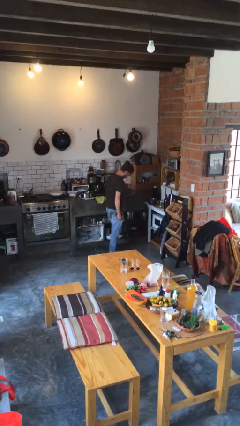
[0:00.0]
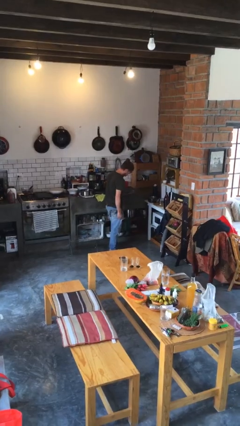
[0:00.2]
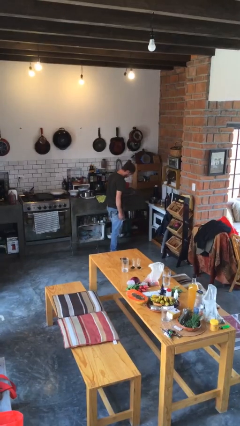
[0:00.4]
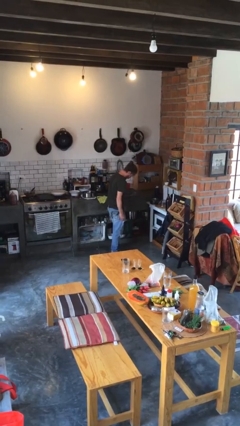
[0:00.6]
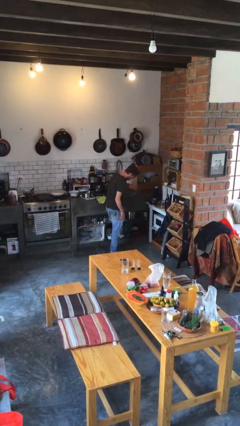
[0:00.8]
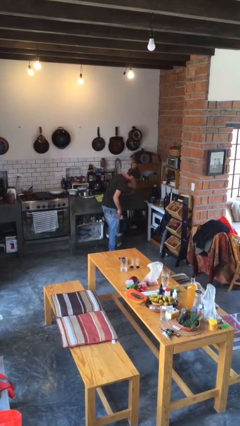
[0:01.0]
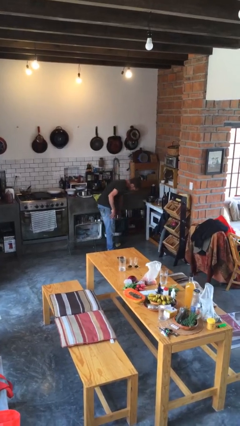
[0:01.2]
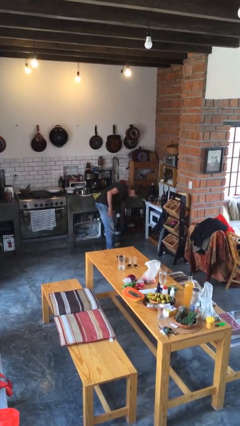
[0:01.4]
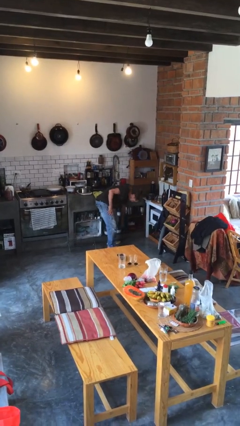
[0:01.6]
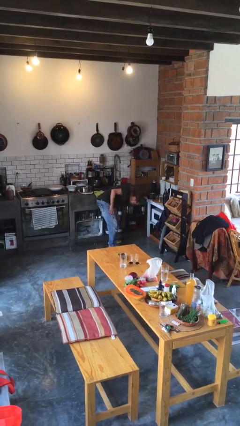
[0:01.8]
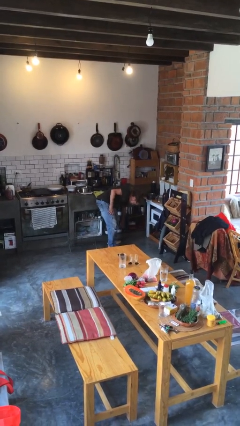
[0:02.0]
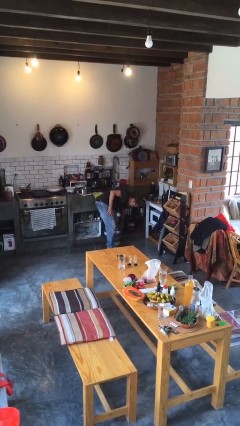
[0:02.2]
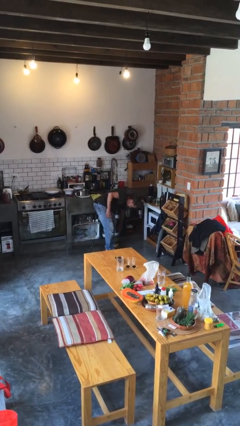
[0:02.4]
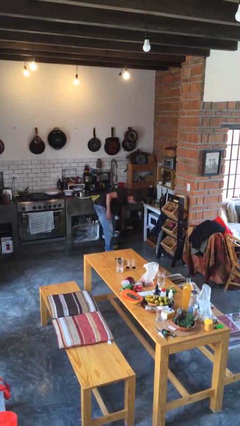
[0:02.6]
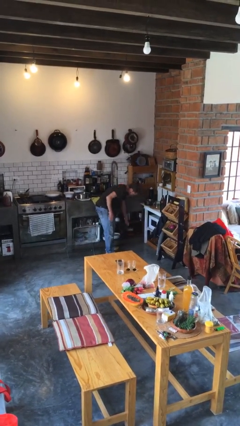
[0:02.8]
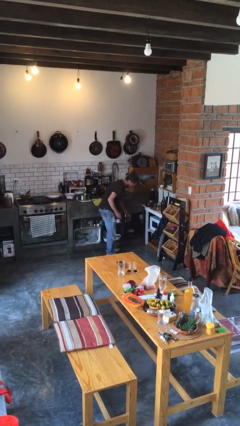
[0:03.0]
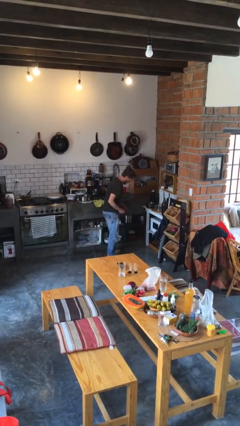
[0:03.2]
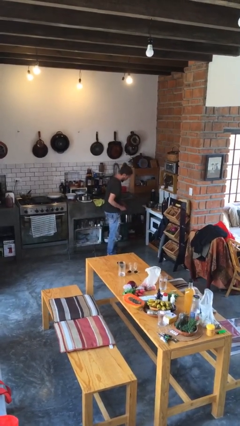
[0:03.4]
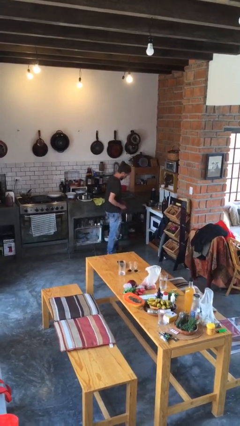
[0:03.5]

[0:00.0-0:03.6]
person picks up object from cabinet

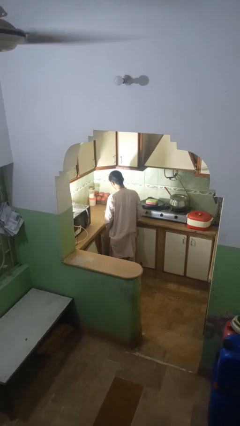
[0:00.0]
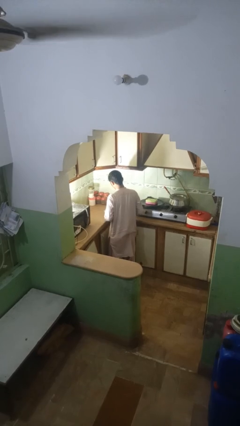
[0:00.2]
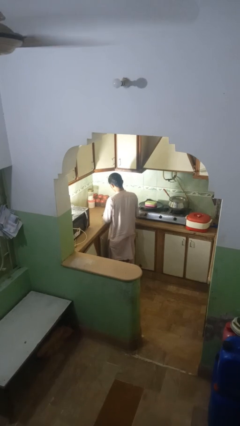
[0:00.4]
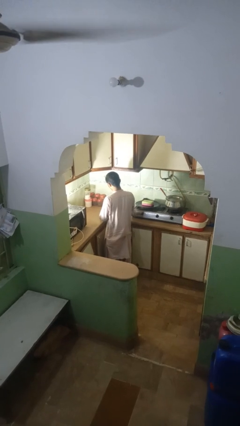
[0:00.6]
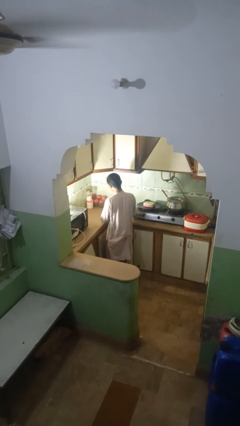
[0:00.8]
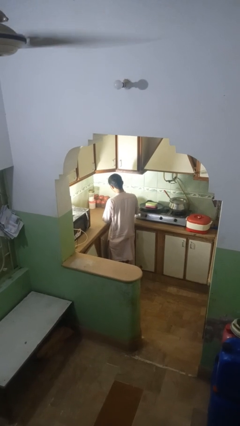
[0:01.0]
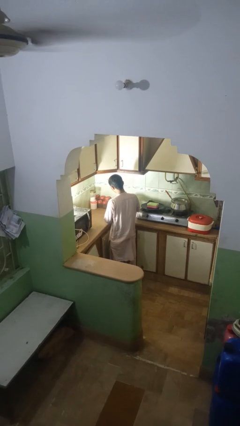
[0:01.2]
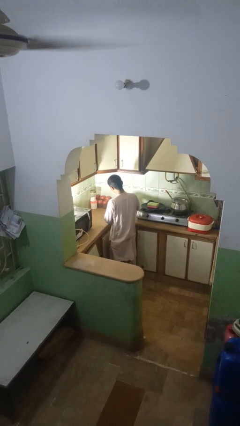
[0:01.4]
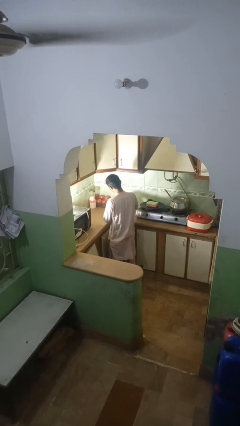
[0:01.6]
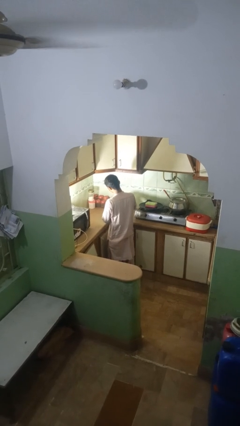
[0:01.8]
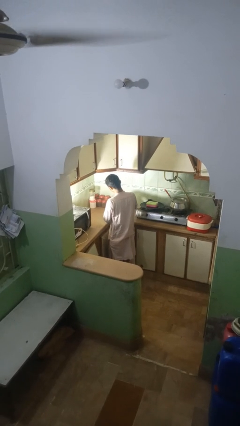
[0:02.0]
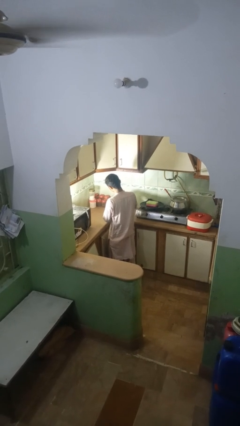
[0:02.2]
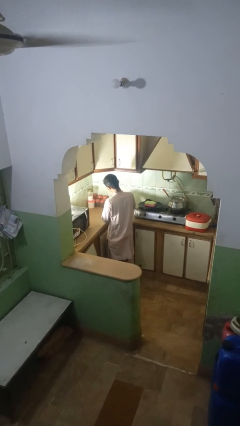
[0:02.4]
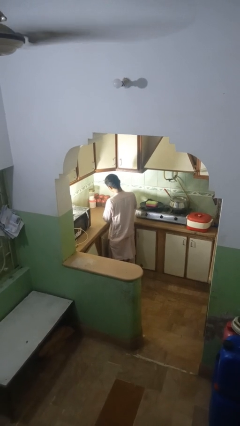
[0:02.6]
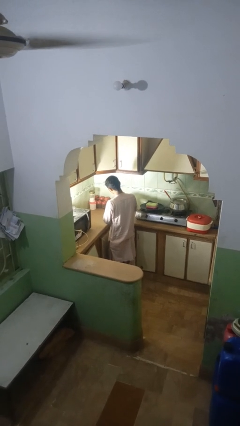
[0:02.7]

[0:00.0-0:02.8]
person pours into bowl

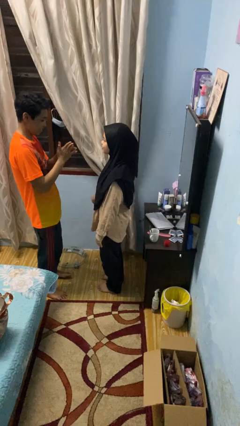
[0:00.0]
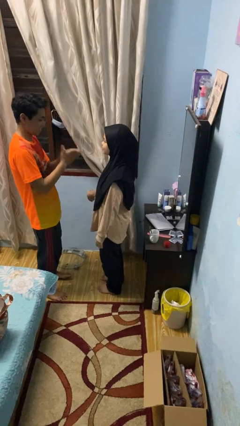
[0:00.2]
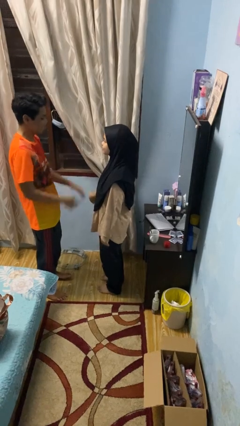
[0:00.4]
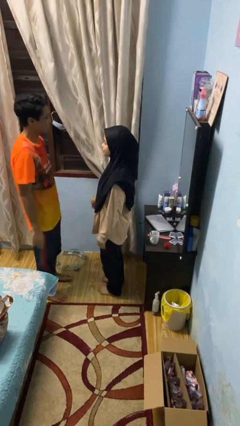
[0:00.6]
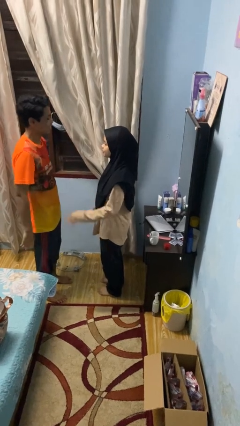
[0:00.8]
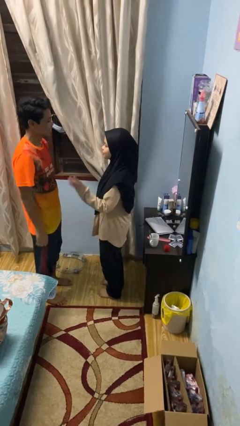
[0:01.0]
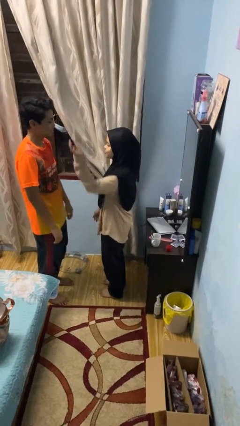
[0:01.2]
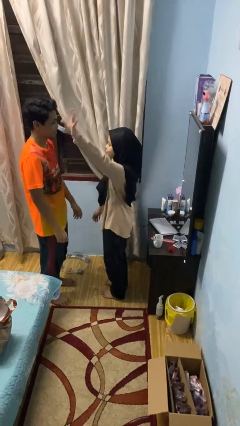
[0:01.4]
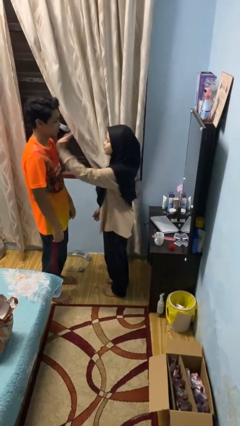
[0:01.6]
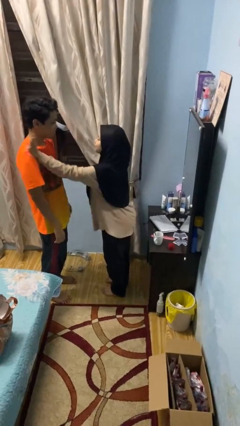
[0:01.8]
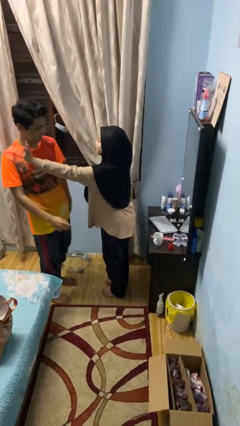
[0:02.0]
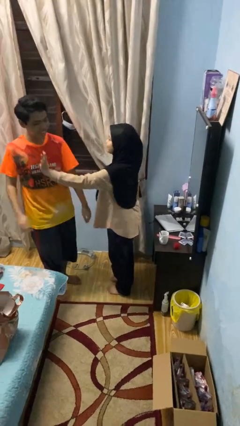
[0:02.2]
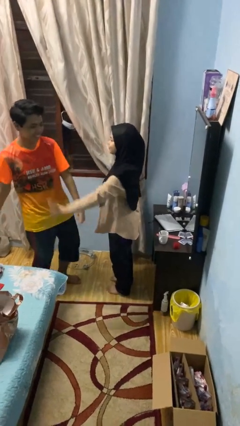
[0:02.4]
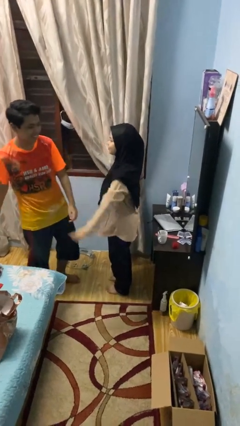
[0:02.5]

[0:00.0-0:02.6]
person shoves person

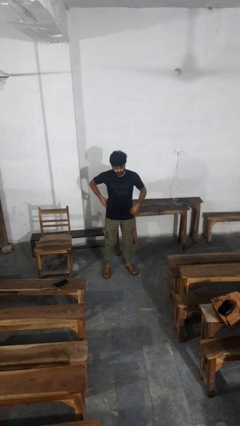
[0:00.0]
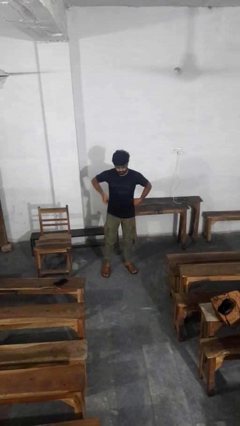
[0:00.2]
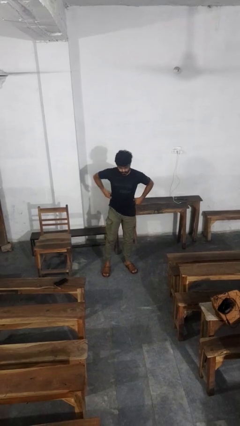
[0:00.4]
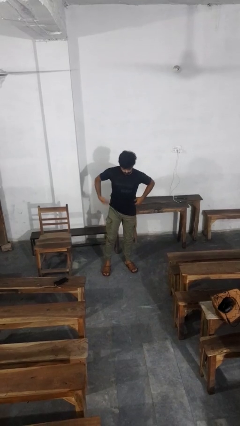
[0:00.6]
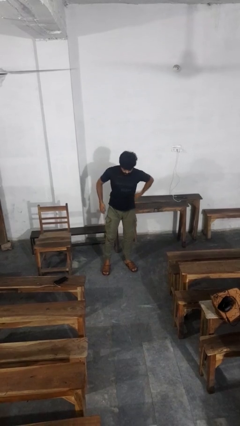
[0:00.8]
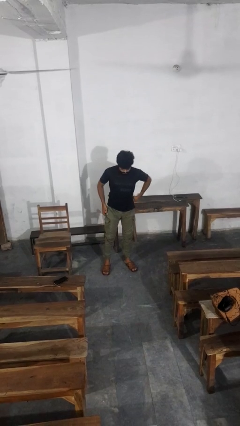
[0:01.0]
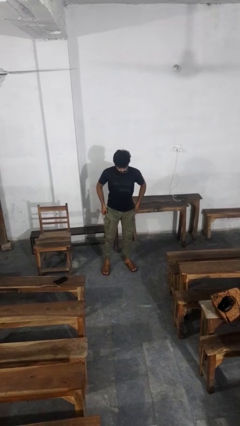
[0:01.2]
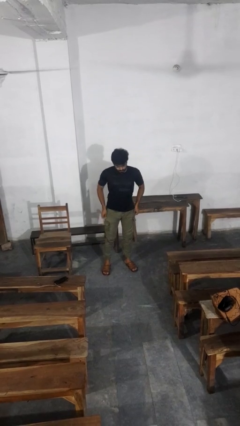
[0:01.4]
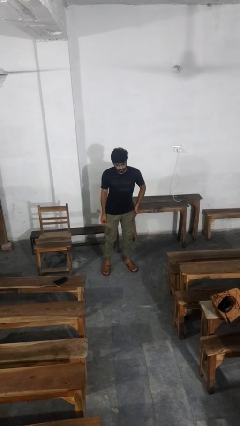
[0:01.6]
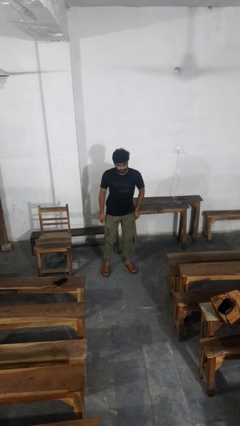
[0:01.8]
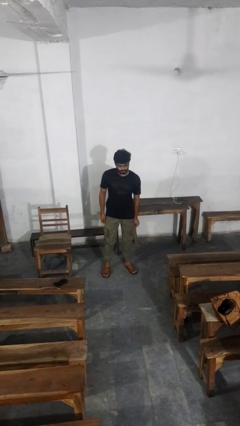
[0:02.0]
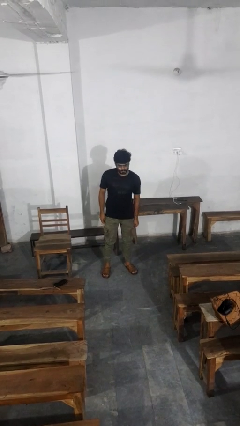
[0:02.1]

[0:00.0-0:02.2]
person hikes up pants

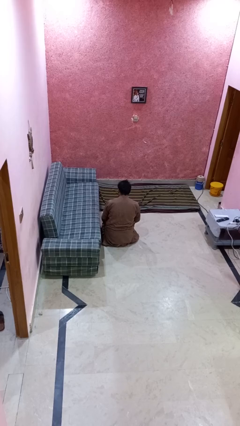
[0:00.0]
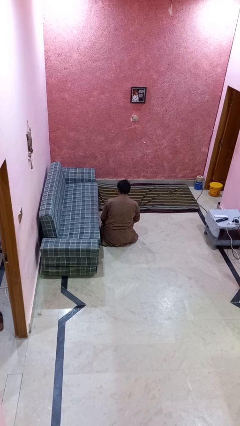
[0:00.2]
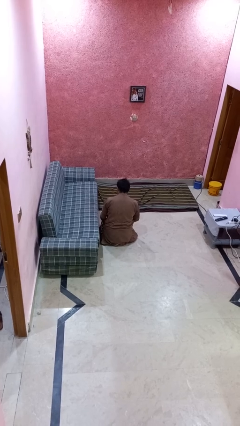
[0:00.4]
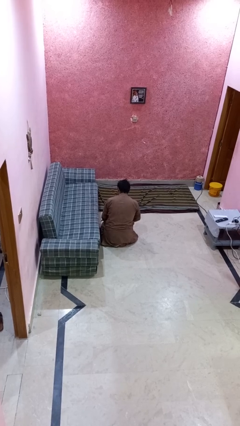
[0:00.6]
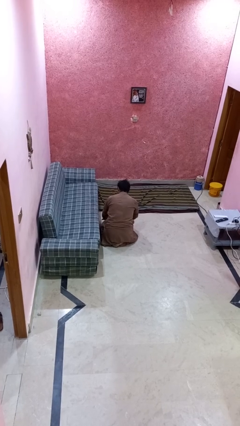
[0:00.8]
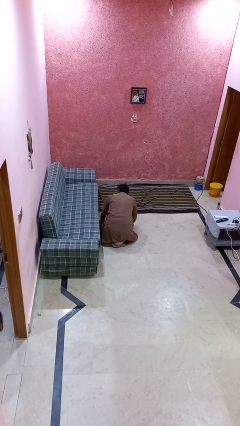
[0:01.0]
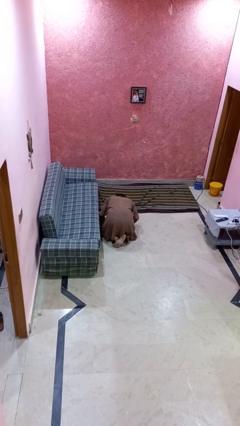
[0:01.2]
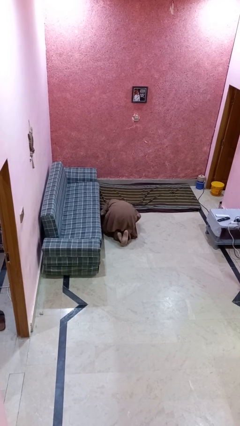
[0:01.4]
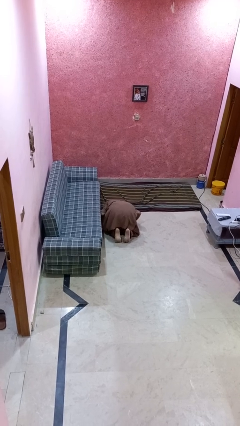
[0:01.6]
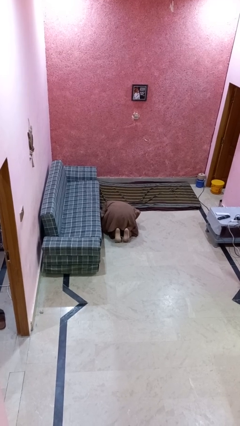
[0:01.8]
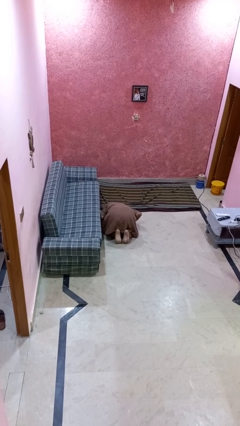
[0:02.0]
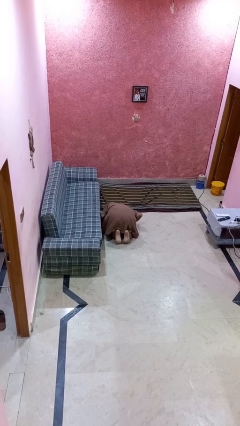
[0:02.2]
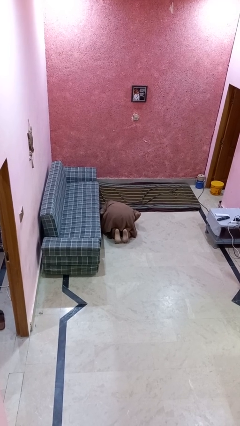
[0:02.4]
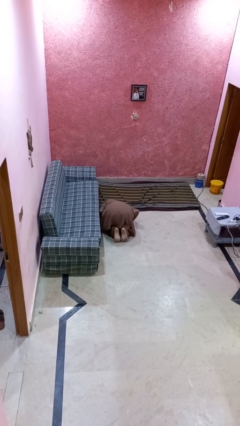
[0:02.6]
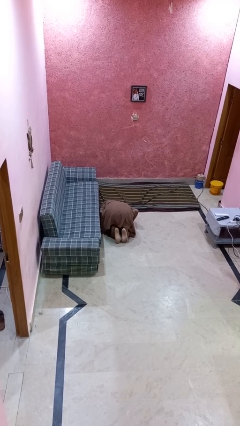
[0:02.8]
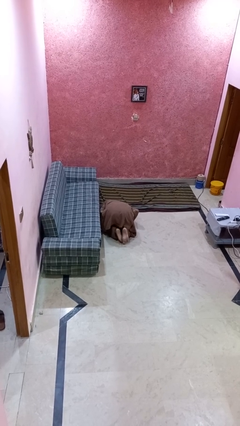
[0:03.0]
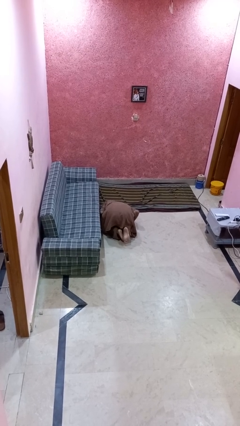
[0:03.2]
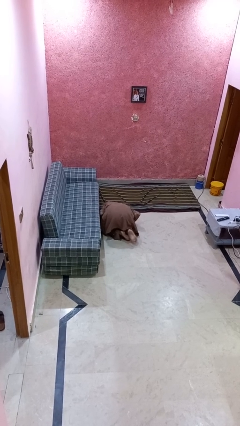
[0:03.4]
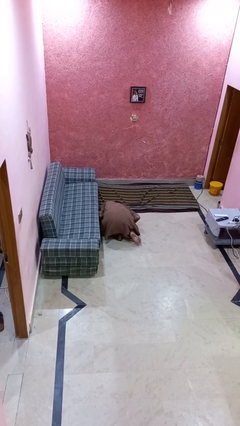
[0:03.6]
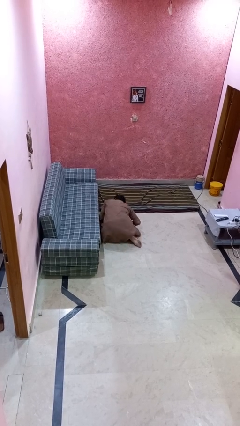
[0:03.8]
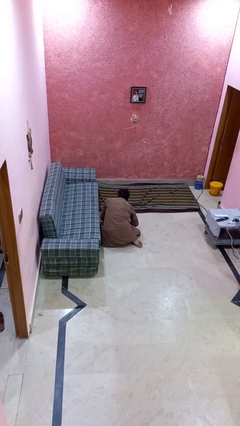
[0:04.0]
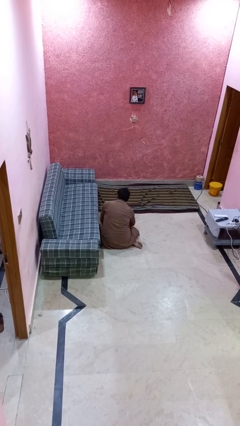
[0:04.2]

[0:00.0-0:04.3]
person searches under couch

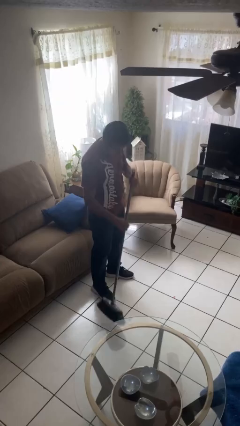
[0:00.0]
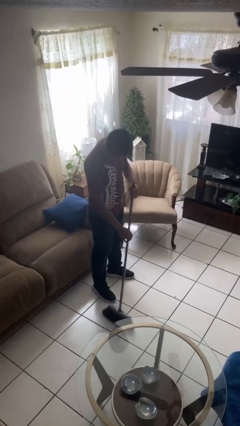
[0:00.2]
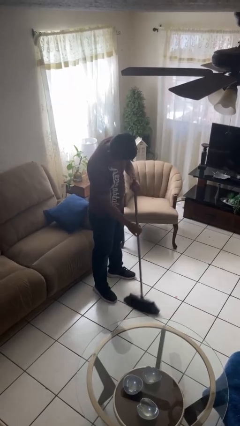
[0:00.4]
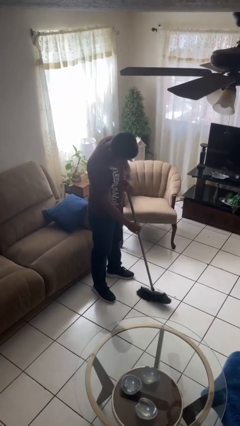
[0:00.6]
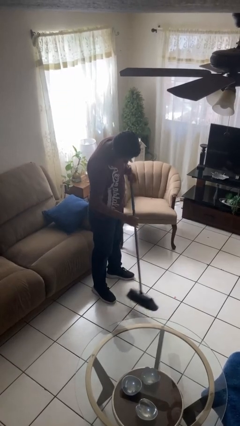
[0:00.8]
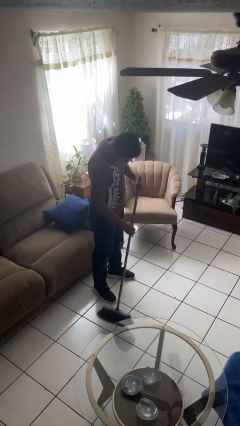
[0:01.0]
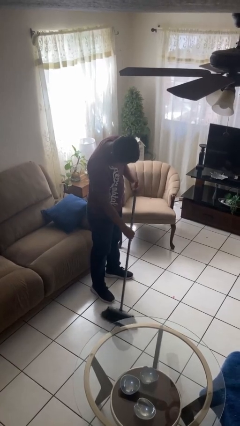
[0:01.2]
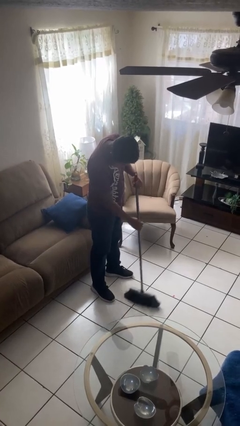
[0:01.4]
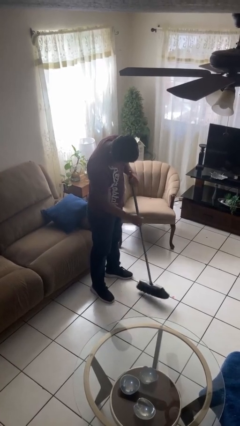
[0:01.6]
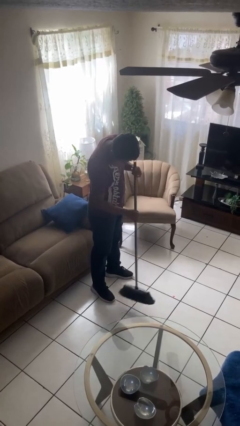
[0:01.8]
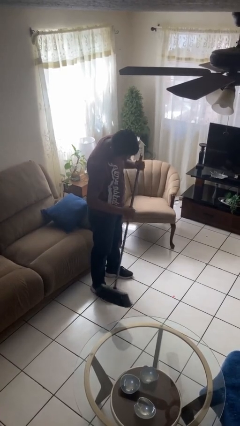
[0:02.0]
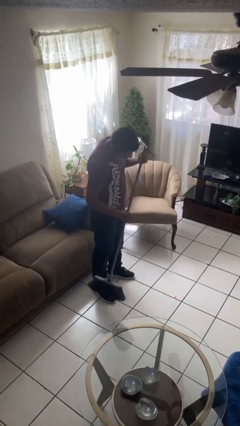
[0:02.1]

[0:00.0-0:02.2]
person sweeps floor
